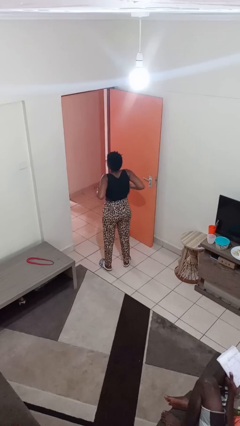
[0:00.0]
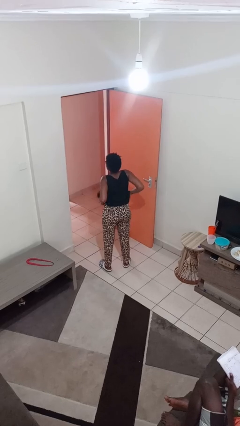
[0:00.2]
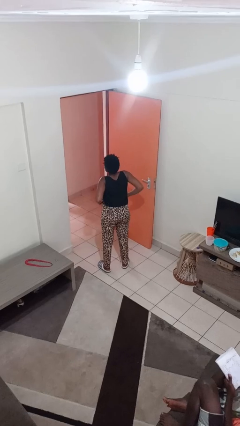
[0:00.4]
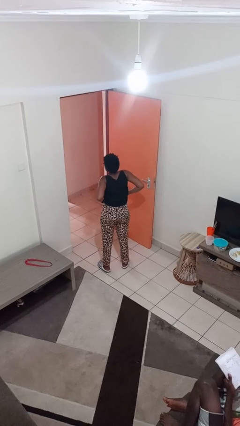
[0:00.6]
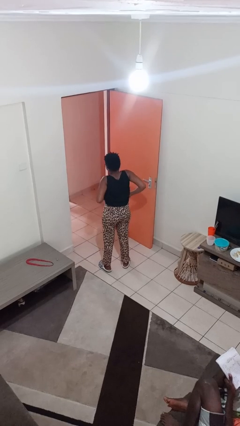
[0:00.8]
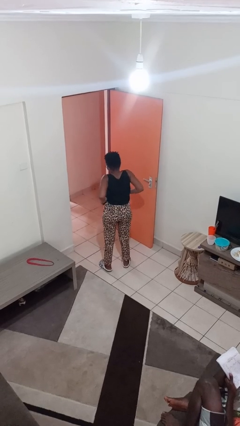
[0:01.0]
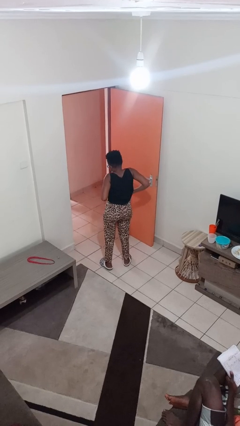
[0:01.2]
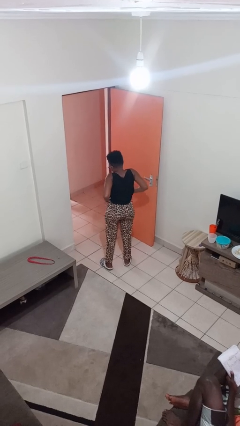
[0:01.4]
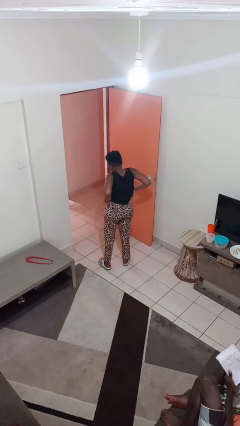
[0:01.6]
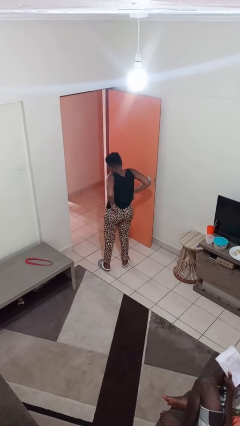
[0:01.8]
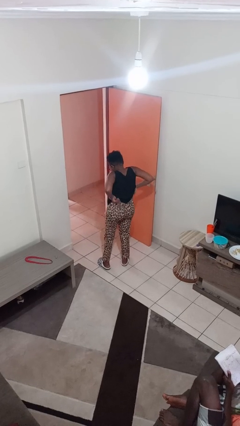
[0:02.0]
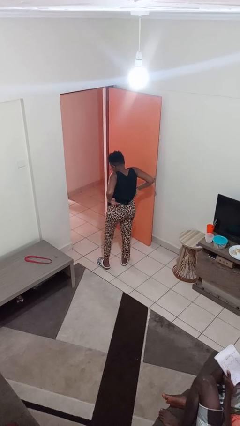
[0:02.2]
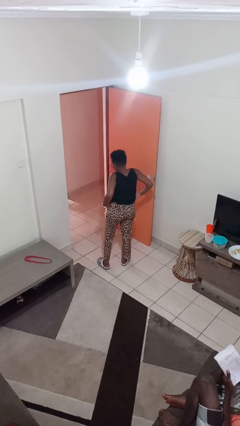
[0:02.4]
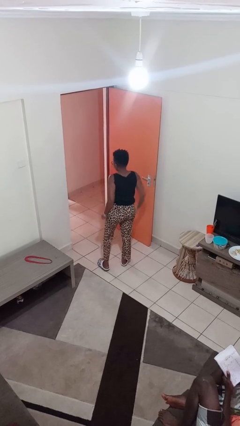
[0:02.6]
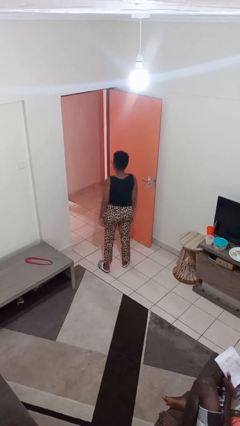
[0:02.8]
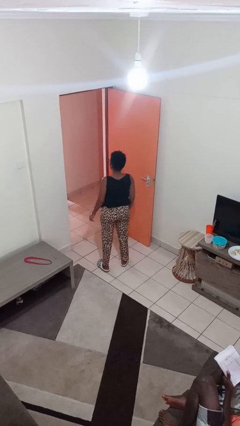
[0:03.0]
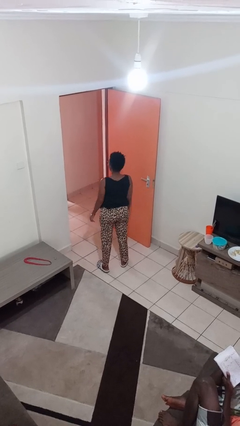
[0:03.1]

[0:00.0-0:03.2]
person hikes up pants

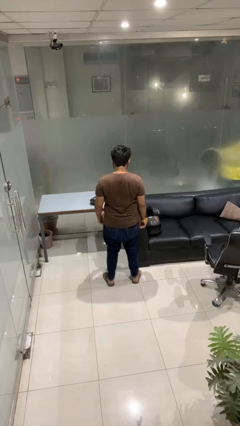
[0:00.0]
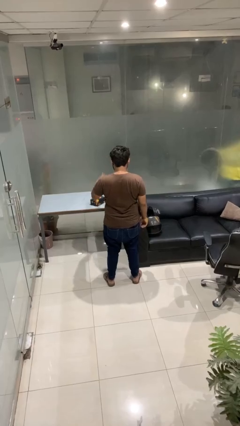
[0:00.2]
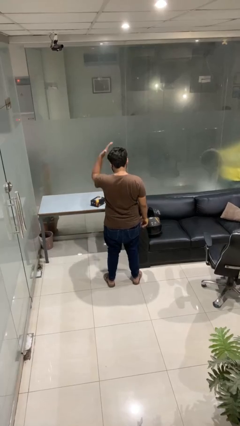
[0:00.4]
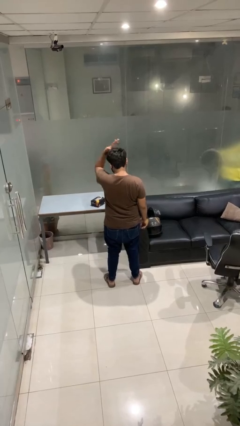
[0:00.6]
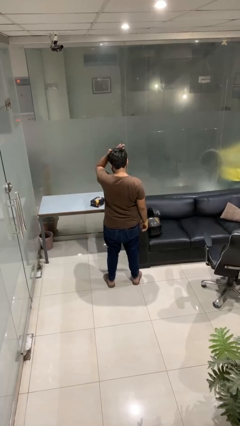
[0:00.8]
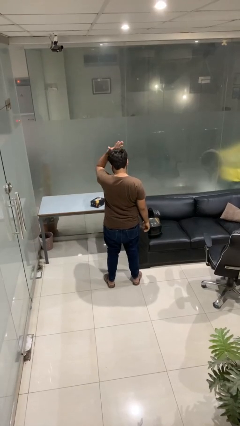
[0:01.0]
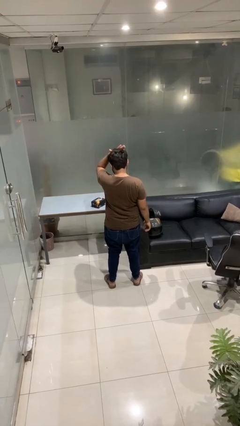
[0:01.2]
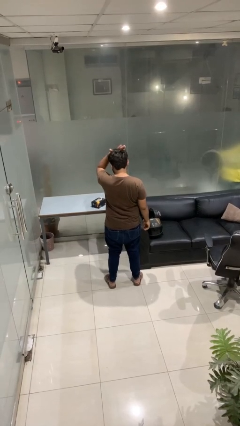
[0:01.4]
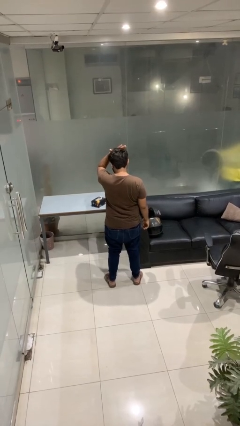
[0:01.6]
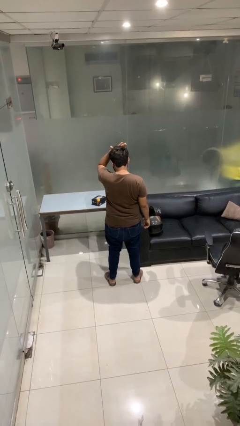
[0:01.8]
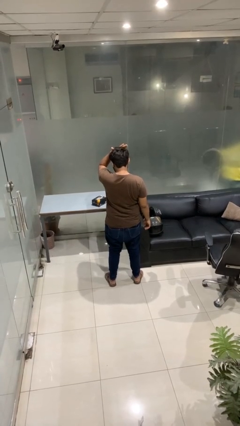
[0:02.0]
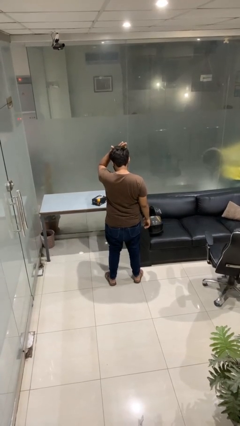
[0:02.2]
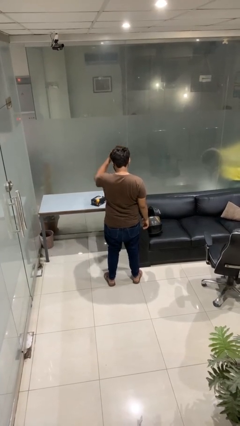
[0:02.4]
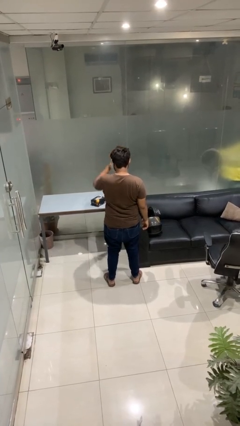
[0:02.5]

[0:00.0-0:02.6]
person pats head

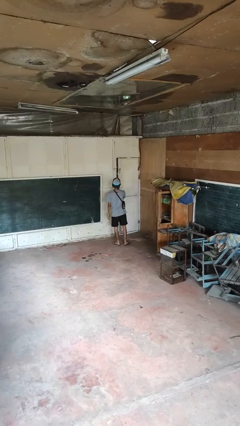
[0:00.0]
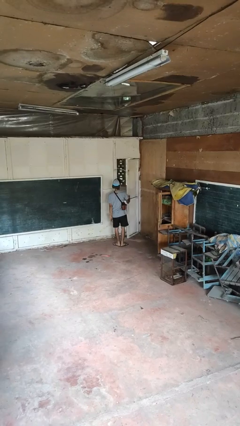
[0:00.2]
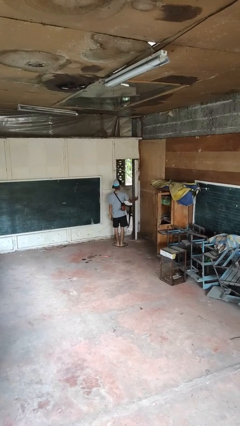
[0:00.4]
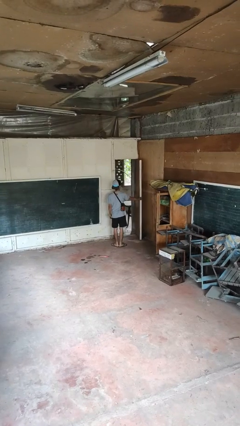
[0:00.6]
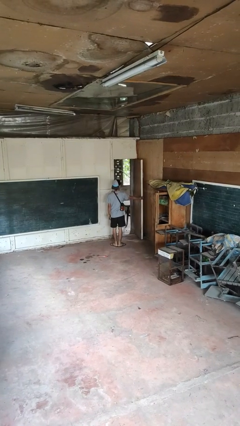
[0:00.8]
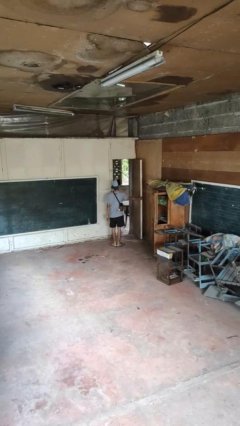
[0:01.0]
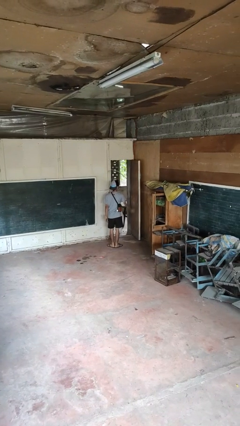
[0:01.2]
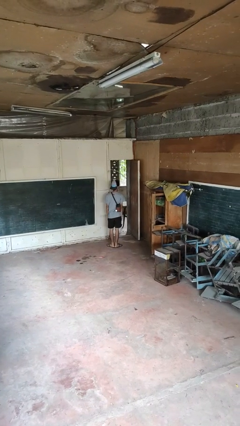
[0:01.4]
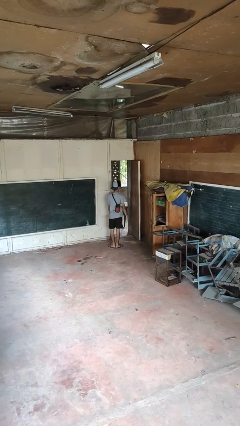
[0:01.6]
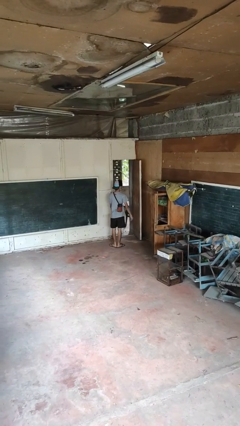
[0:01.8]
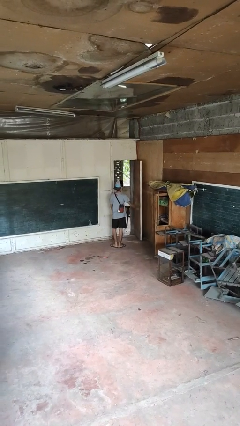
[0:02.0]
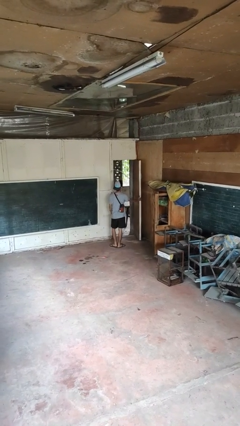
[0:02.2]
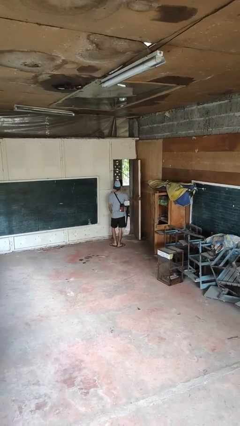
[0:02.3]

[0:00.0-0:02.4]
person opens facility door

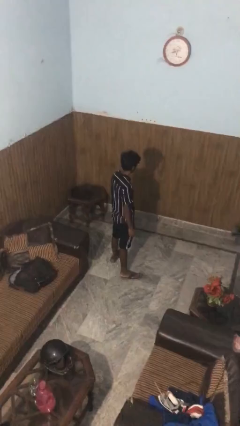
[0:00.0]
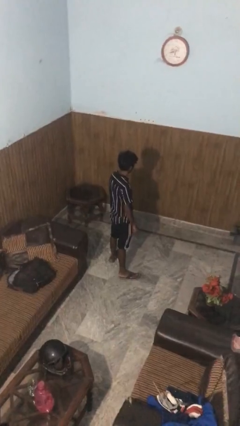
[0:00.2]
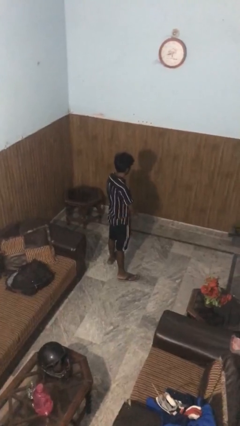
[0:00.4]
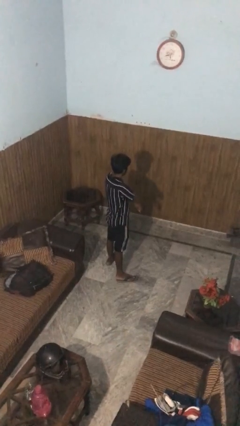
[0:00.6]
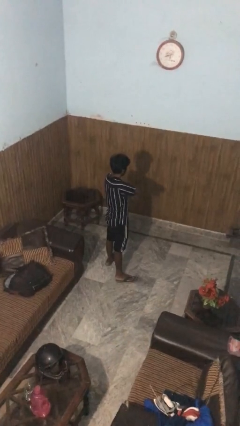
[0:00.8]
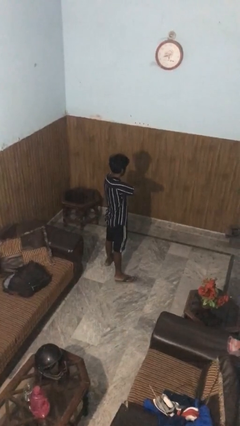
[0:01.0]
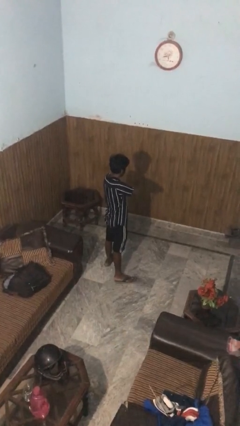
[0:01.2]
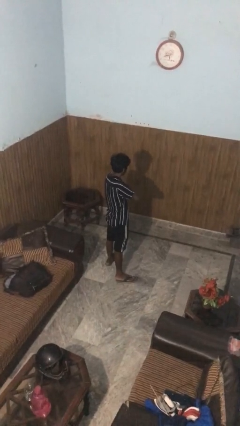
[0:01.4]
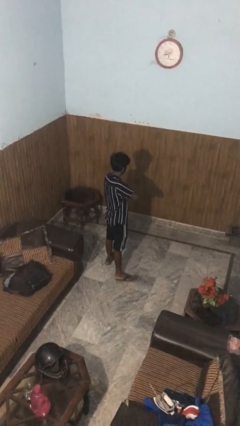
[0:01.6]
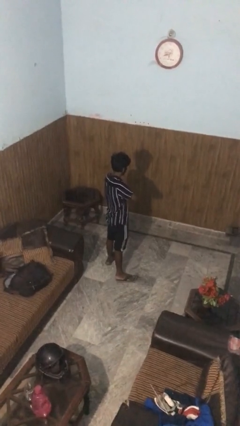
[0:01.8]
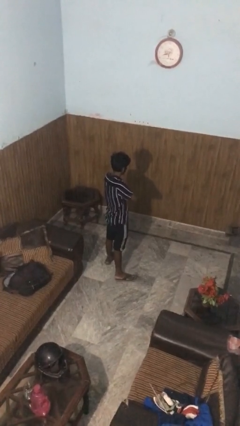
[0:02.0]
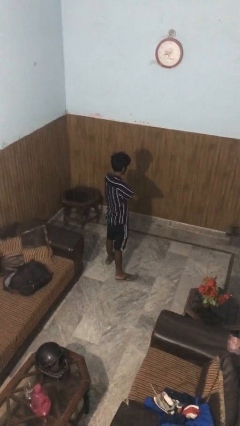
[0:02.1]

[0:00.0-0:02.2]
person crosses arms

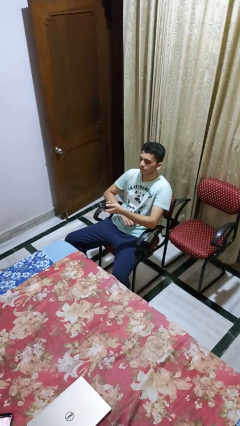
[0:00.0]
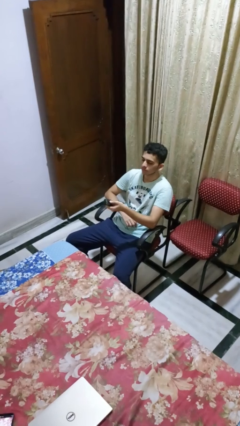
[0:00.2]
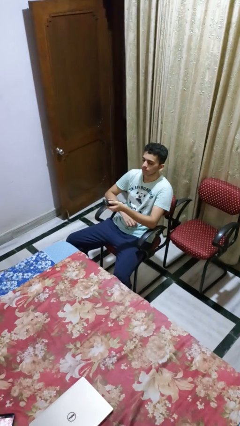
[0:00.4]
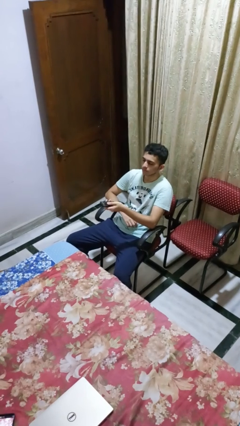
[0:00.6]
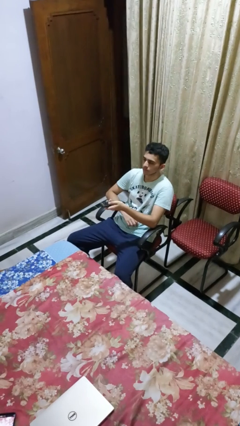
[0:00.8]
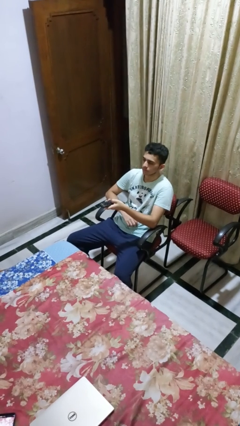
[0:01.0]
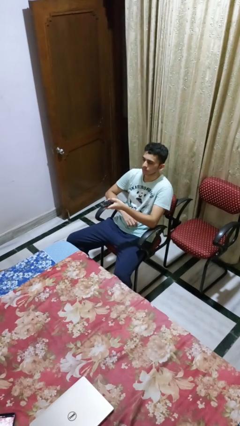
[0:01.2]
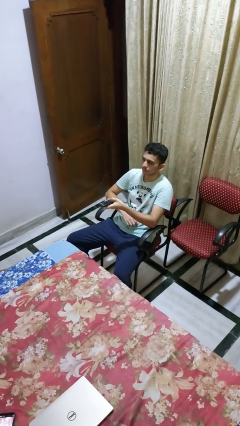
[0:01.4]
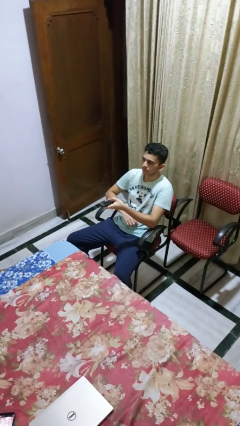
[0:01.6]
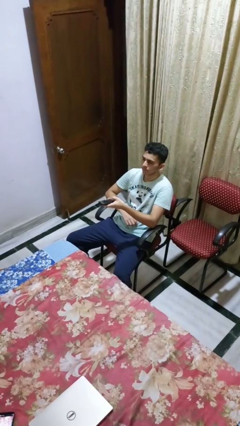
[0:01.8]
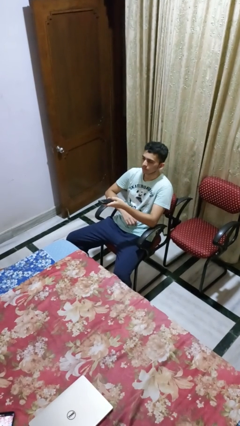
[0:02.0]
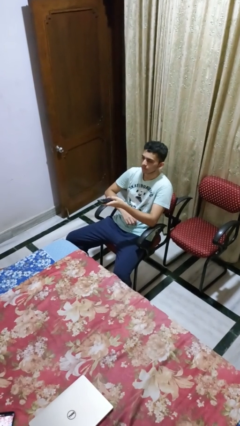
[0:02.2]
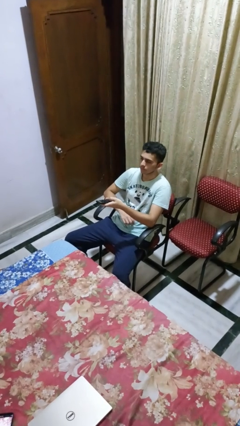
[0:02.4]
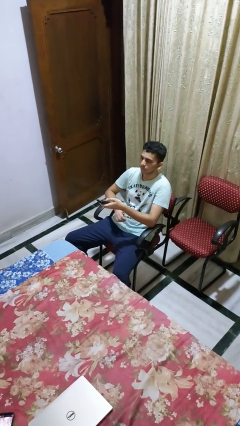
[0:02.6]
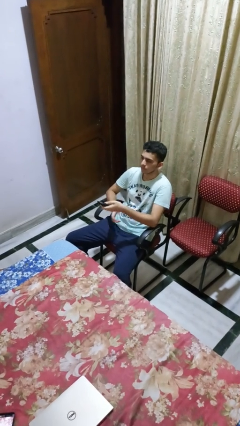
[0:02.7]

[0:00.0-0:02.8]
person uses television remote

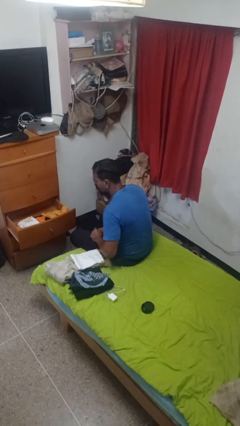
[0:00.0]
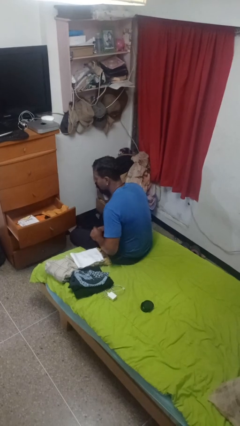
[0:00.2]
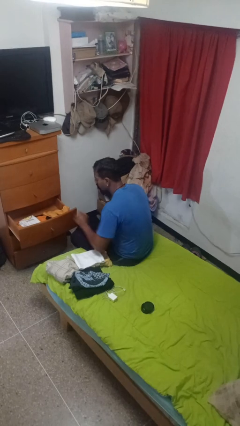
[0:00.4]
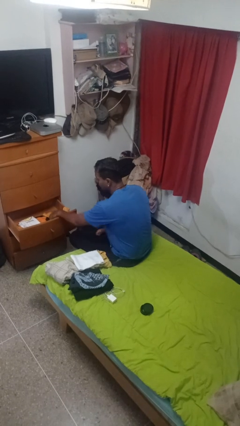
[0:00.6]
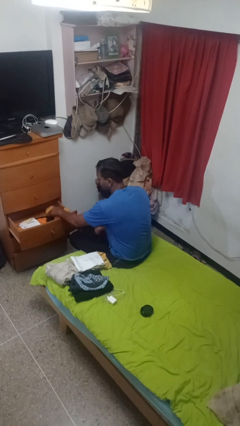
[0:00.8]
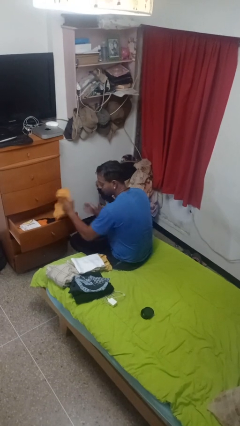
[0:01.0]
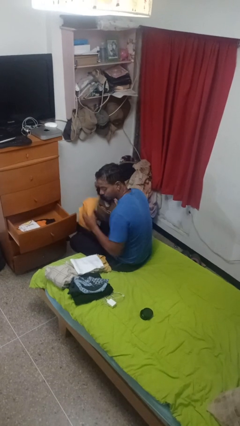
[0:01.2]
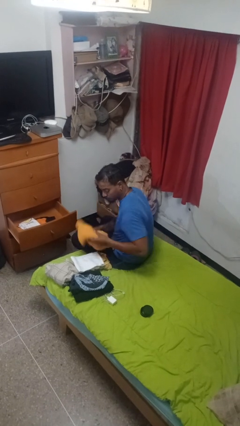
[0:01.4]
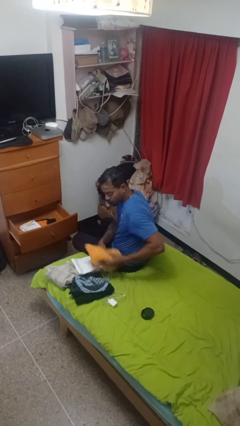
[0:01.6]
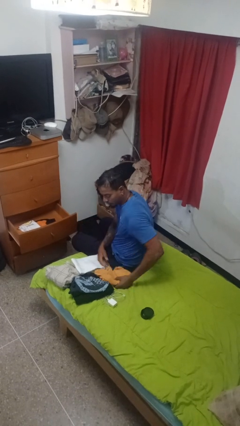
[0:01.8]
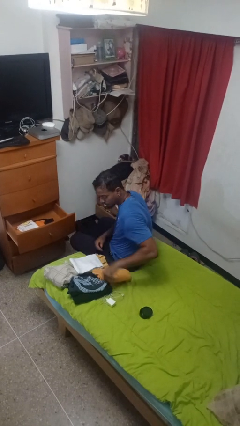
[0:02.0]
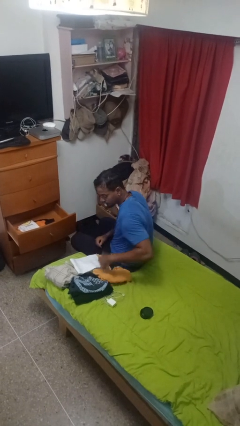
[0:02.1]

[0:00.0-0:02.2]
person takes clothes from dresser

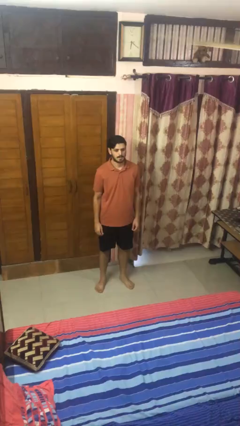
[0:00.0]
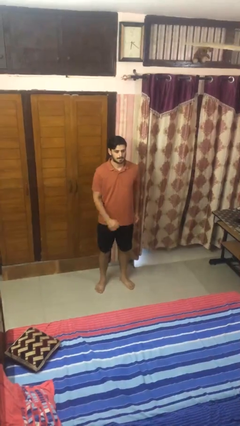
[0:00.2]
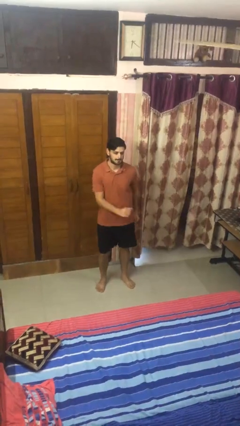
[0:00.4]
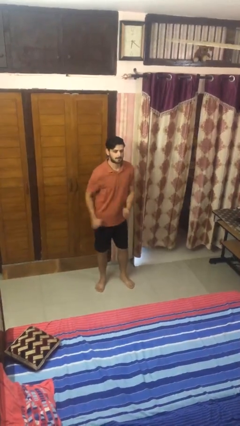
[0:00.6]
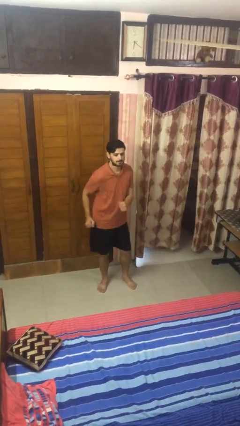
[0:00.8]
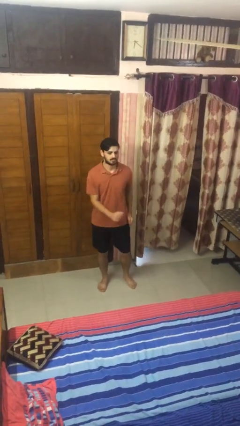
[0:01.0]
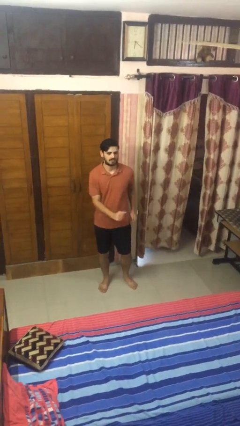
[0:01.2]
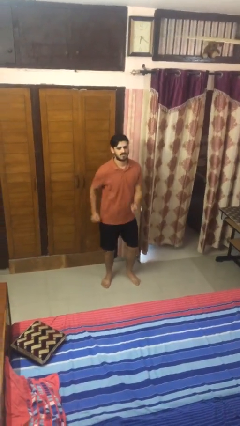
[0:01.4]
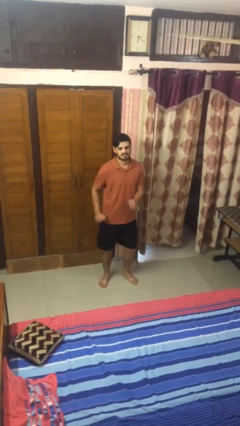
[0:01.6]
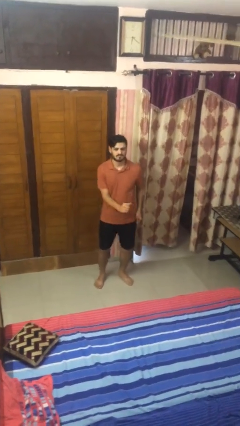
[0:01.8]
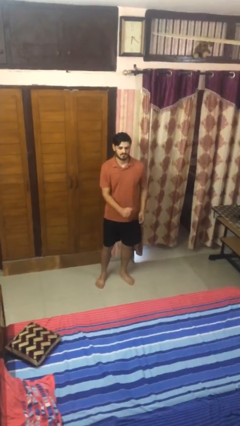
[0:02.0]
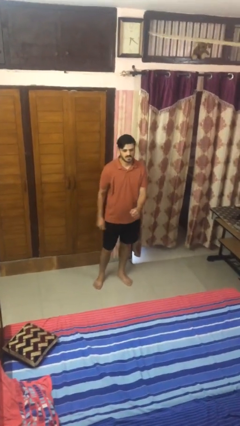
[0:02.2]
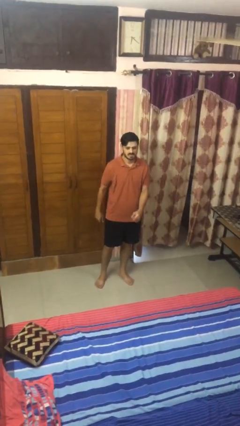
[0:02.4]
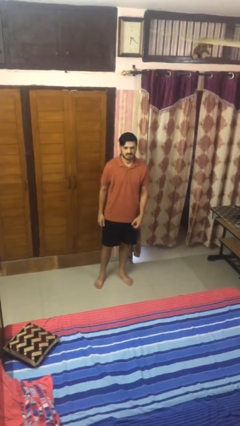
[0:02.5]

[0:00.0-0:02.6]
person dances in place
